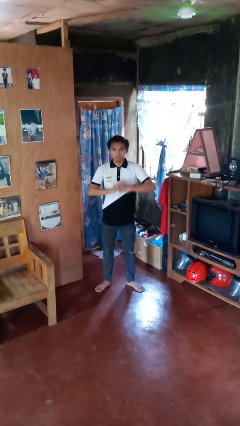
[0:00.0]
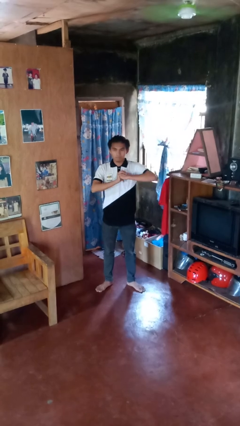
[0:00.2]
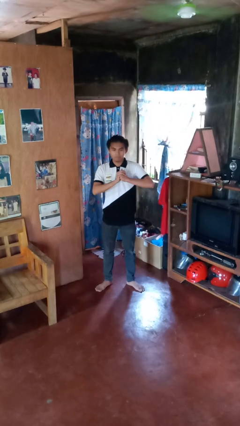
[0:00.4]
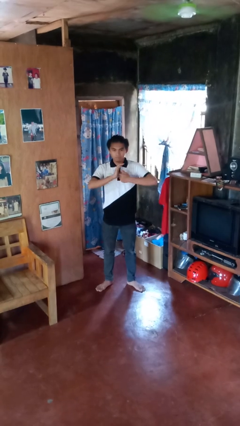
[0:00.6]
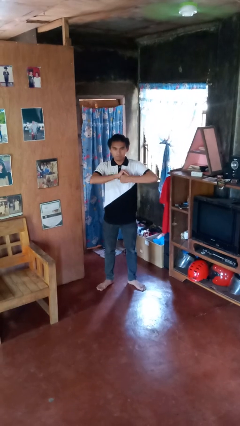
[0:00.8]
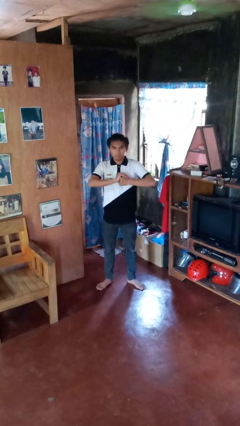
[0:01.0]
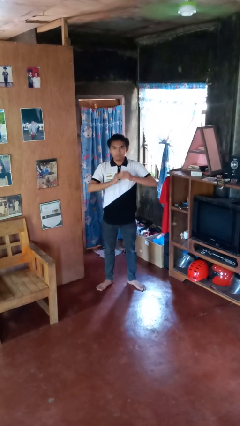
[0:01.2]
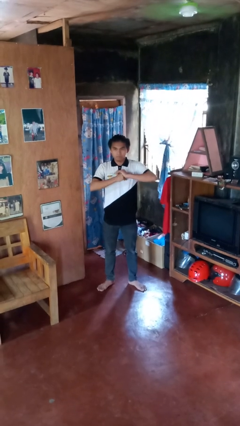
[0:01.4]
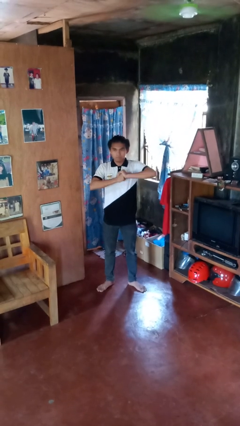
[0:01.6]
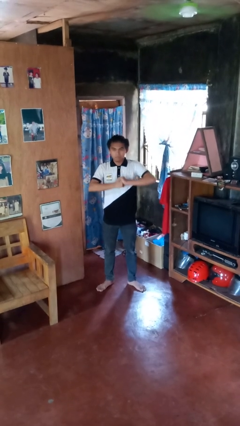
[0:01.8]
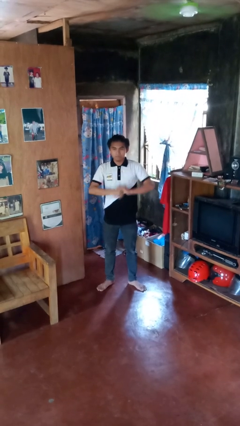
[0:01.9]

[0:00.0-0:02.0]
person cracks knuckles

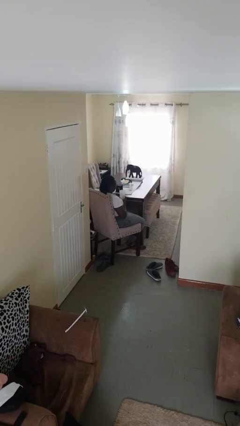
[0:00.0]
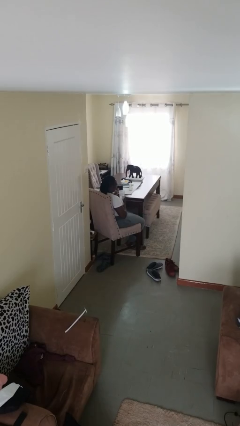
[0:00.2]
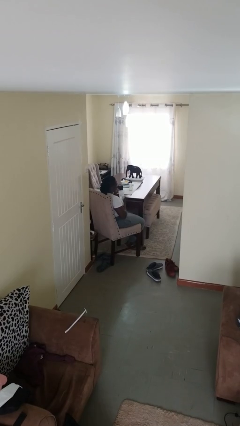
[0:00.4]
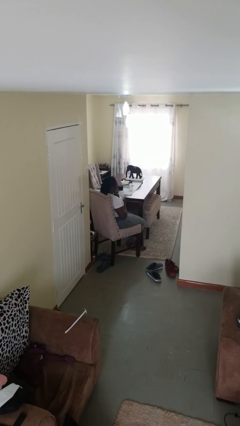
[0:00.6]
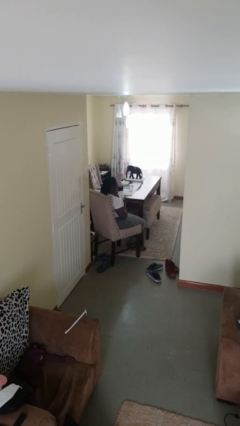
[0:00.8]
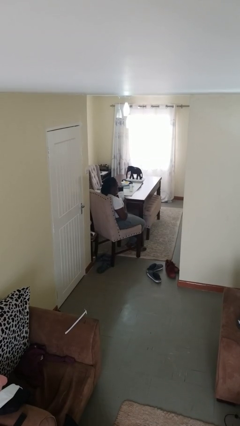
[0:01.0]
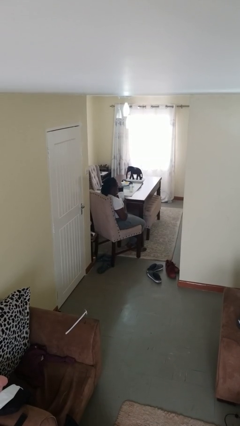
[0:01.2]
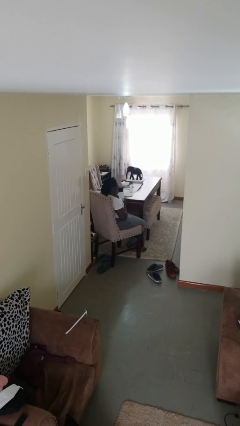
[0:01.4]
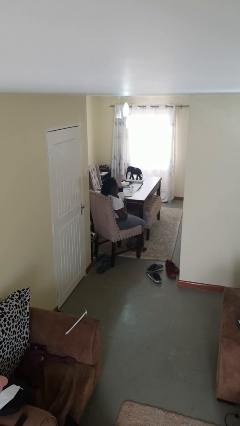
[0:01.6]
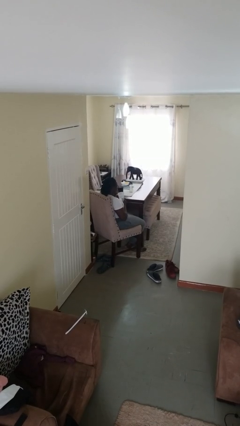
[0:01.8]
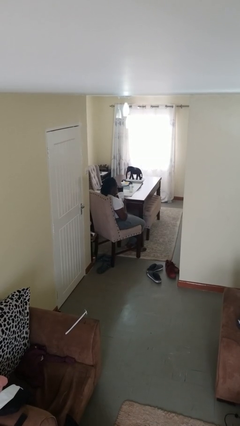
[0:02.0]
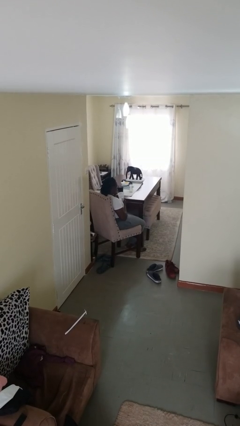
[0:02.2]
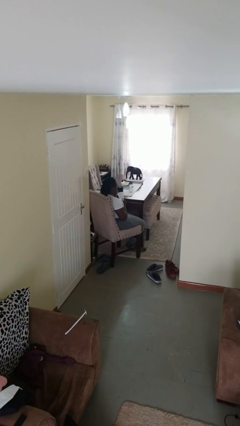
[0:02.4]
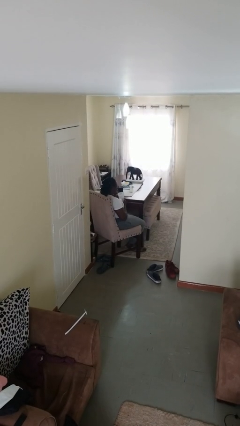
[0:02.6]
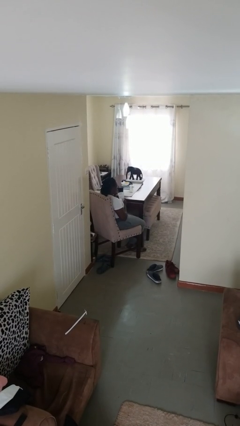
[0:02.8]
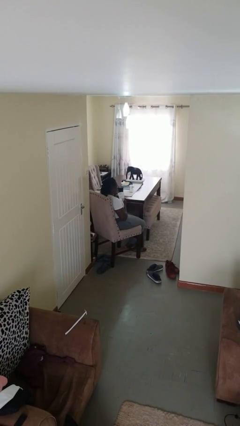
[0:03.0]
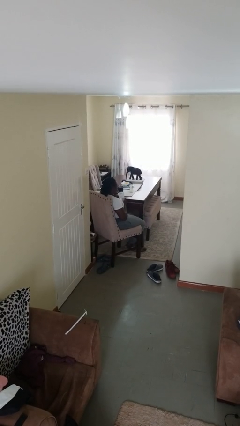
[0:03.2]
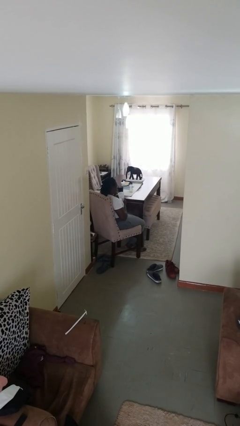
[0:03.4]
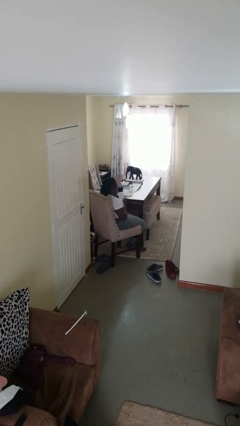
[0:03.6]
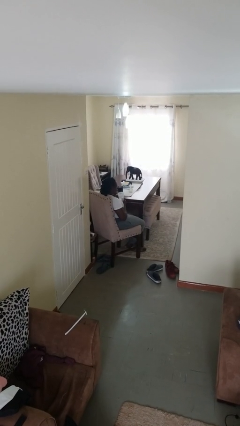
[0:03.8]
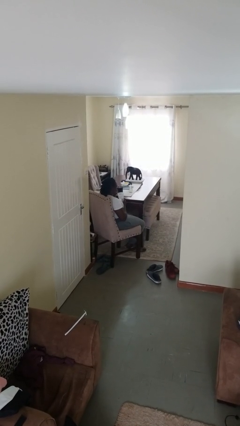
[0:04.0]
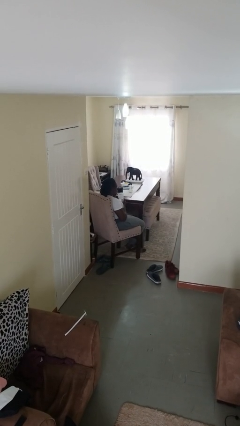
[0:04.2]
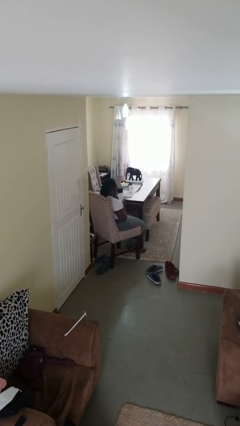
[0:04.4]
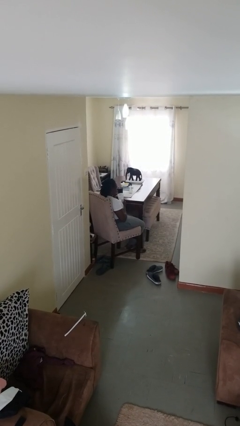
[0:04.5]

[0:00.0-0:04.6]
person drinks from straw

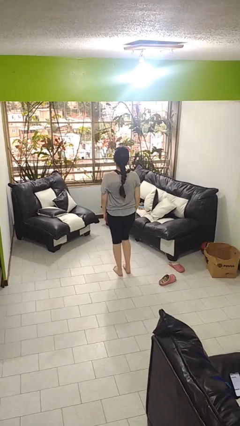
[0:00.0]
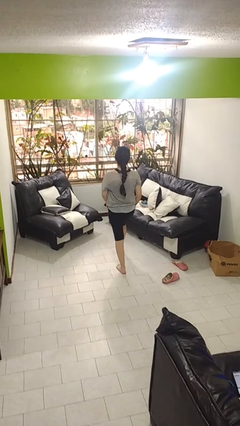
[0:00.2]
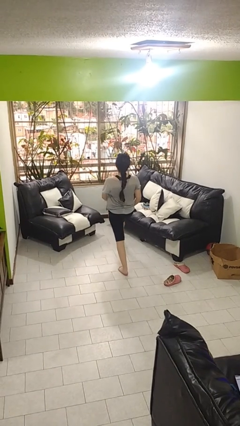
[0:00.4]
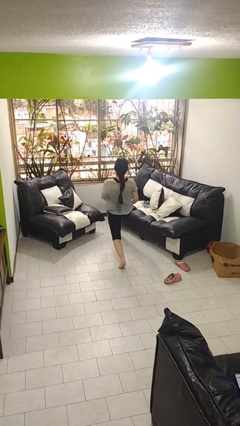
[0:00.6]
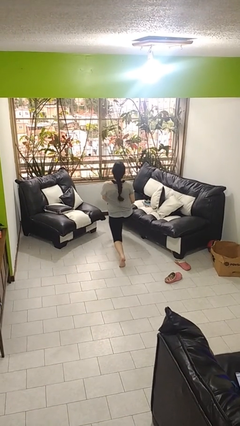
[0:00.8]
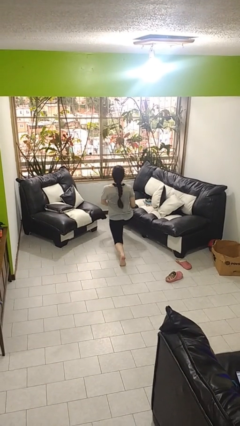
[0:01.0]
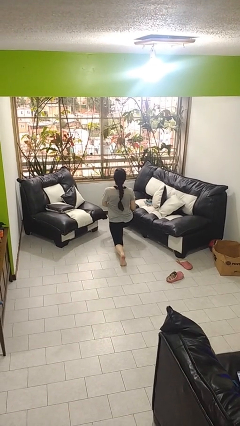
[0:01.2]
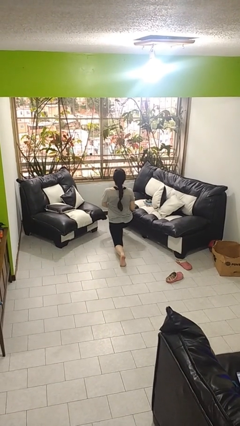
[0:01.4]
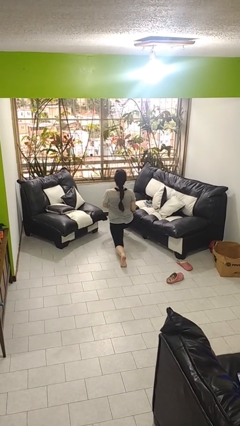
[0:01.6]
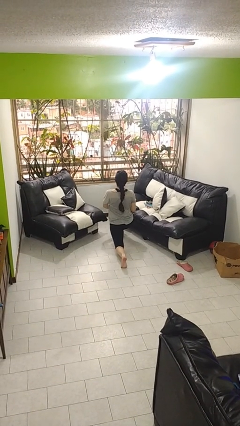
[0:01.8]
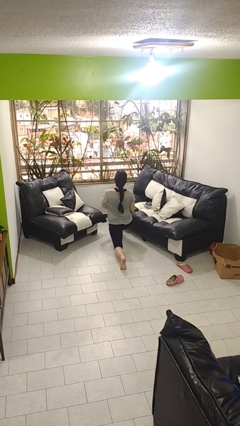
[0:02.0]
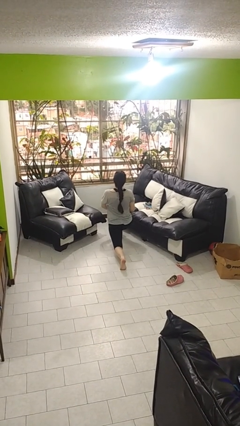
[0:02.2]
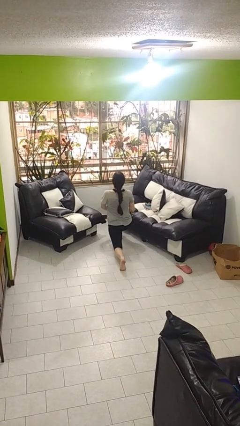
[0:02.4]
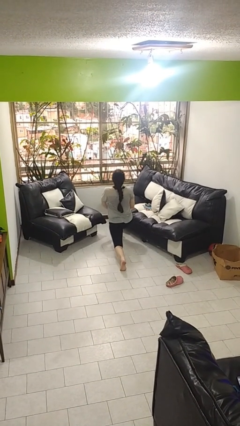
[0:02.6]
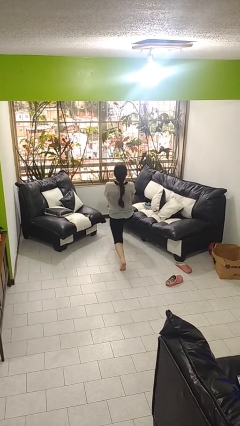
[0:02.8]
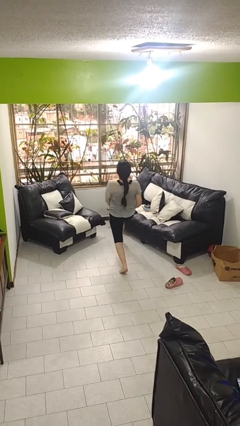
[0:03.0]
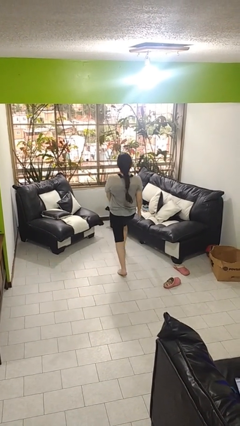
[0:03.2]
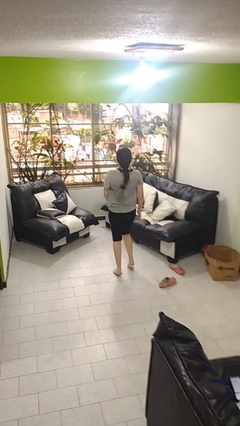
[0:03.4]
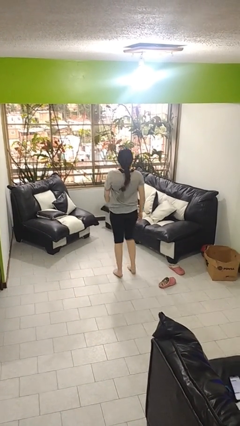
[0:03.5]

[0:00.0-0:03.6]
person exercises with lunges

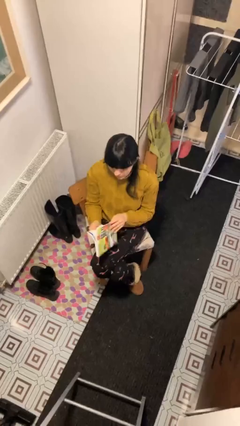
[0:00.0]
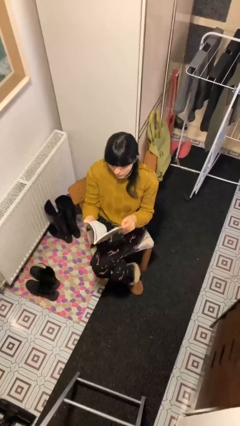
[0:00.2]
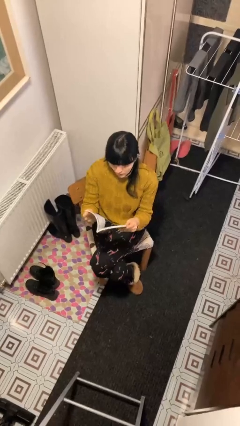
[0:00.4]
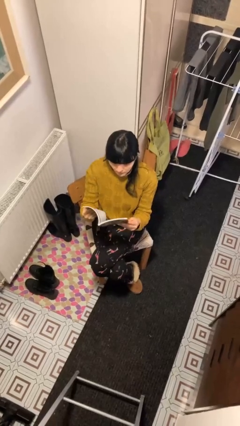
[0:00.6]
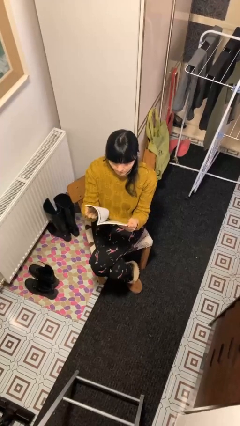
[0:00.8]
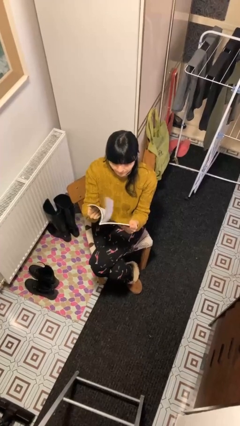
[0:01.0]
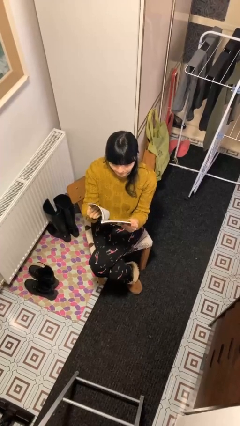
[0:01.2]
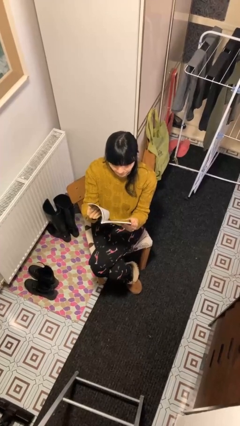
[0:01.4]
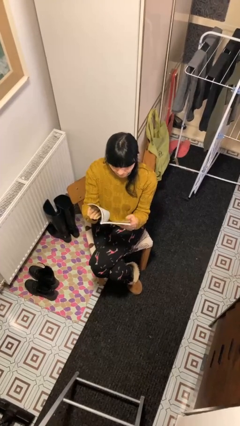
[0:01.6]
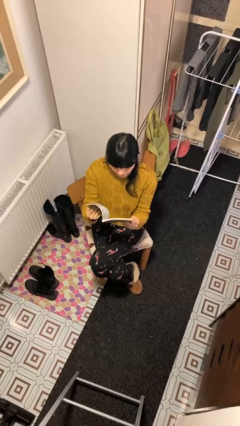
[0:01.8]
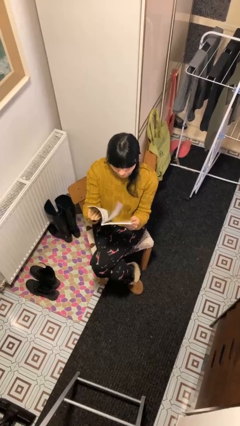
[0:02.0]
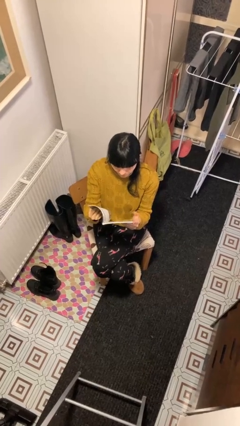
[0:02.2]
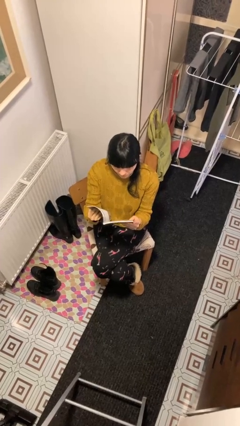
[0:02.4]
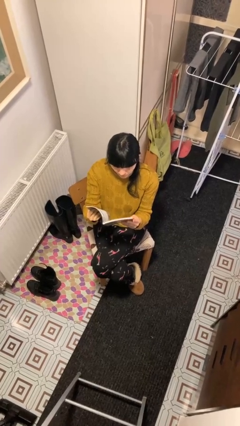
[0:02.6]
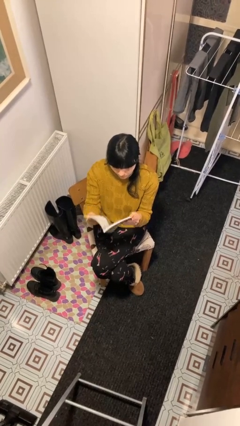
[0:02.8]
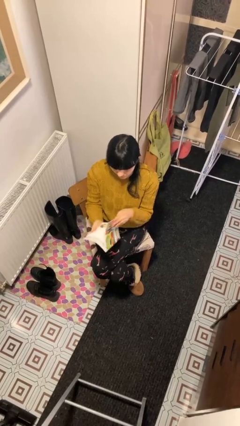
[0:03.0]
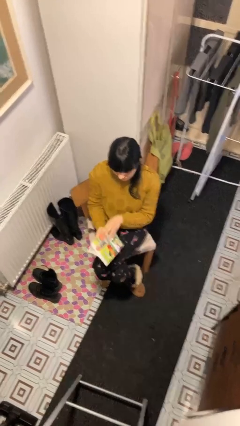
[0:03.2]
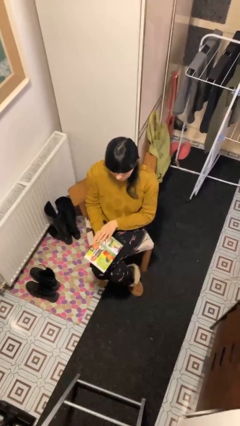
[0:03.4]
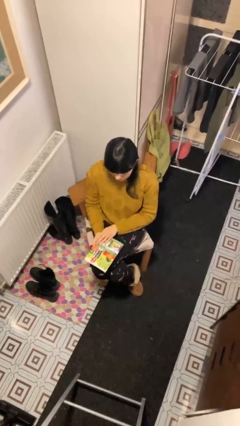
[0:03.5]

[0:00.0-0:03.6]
person reads document

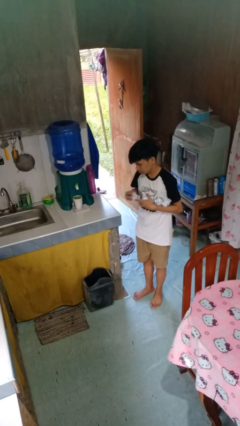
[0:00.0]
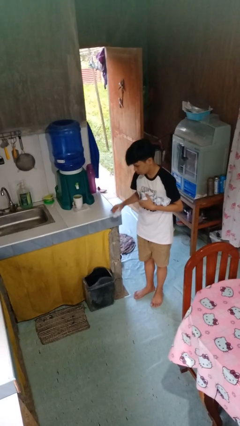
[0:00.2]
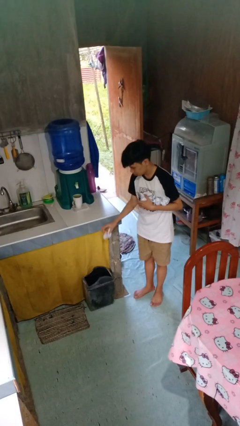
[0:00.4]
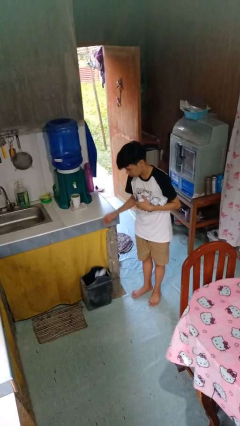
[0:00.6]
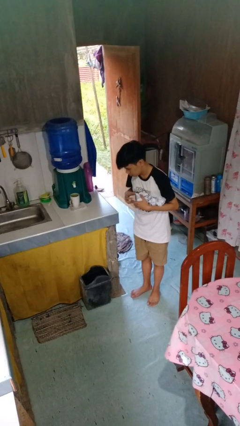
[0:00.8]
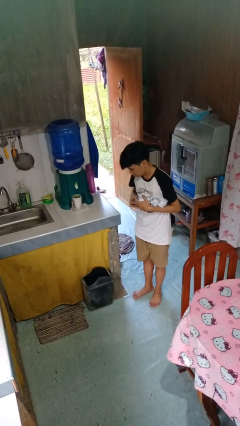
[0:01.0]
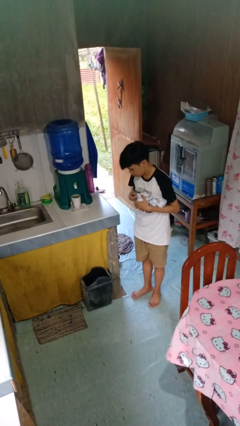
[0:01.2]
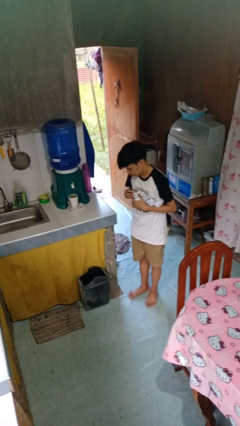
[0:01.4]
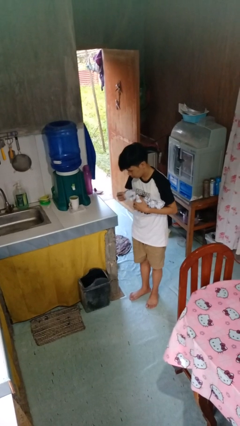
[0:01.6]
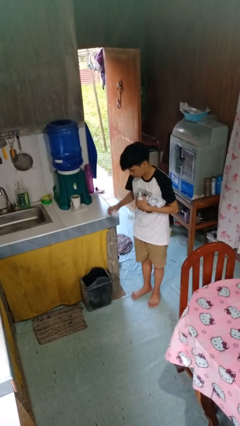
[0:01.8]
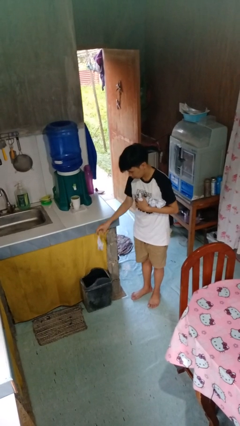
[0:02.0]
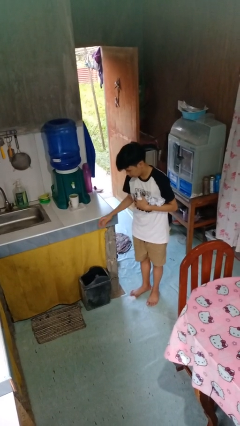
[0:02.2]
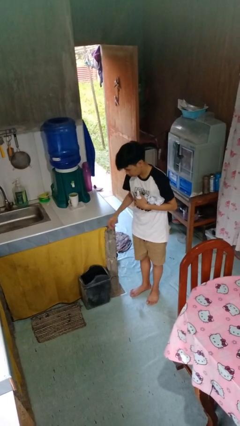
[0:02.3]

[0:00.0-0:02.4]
person discards trash

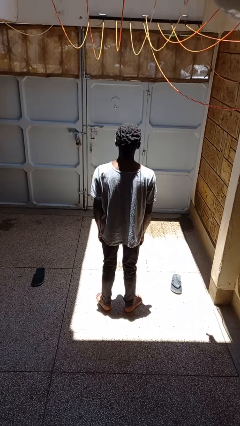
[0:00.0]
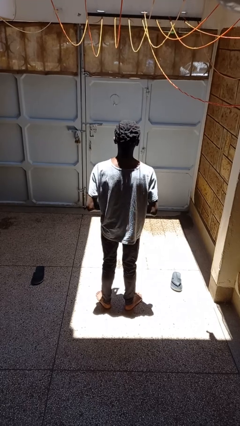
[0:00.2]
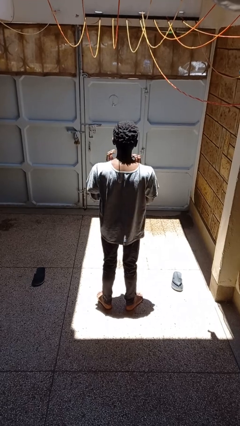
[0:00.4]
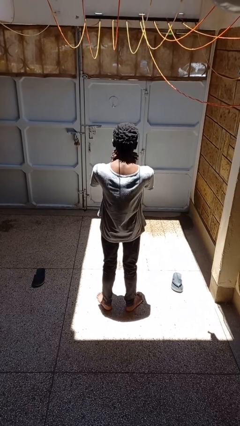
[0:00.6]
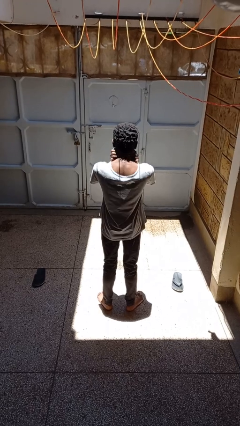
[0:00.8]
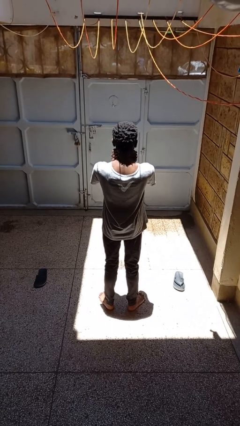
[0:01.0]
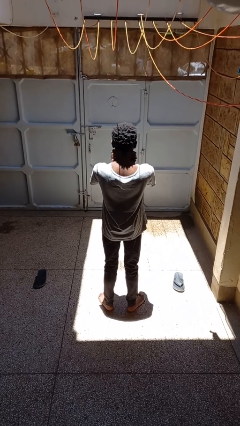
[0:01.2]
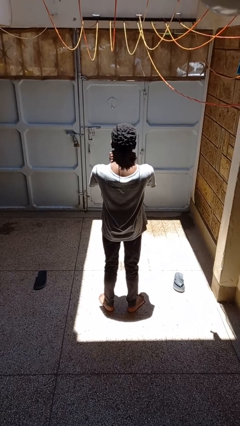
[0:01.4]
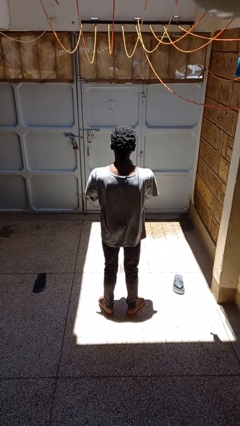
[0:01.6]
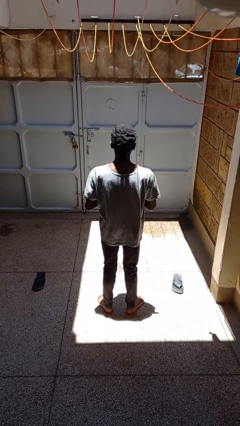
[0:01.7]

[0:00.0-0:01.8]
person rubs neck
